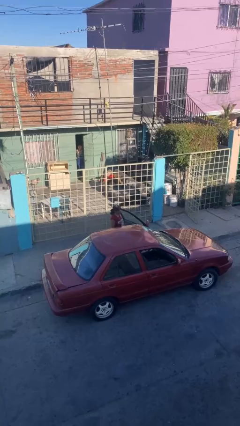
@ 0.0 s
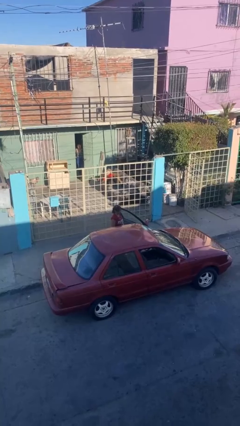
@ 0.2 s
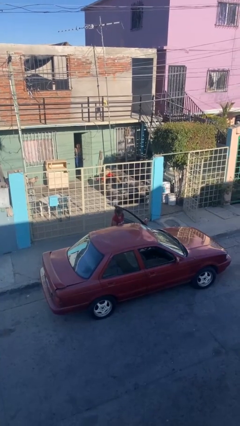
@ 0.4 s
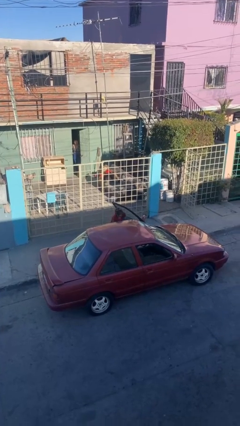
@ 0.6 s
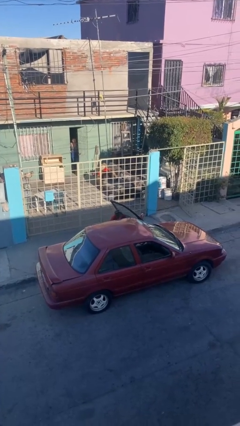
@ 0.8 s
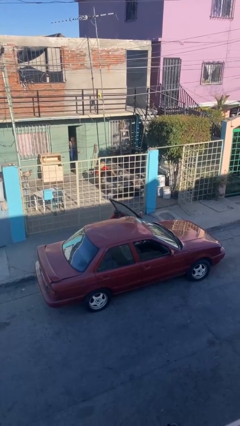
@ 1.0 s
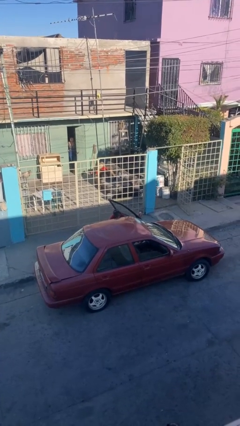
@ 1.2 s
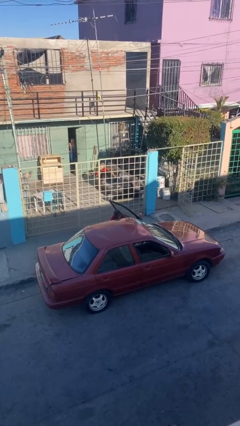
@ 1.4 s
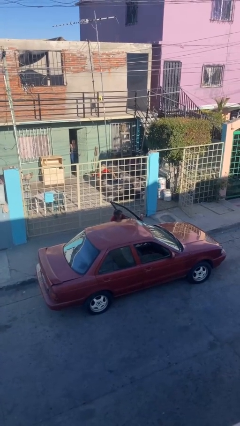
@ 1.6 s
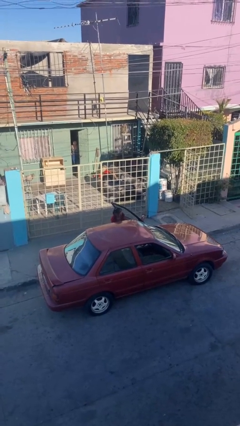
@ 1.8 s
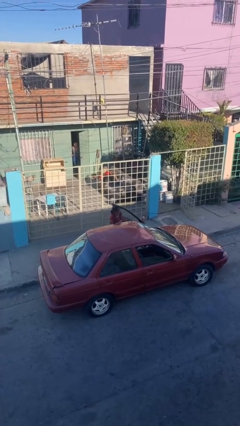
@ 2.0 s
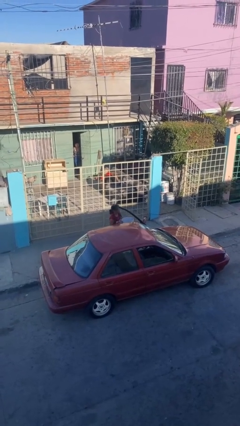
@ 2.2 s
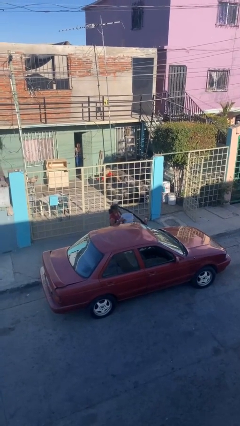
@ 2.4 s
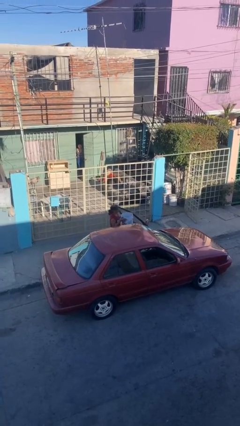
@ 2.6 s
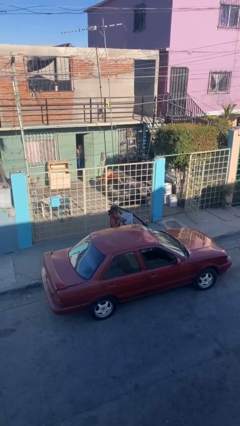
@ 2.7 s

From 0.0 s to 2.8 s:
person unloads car

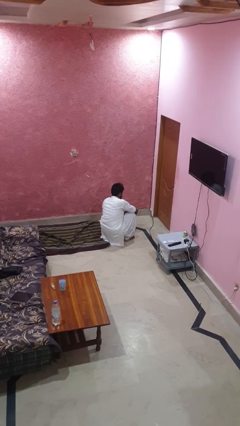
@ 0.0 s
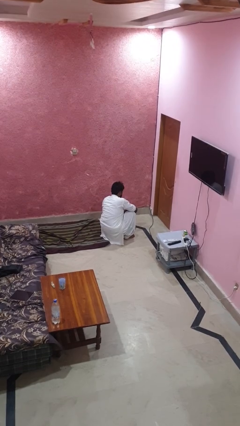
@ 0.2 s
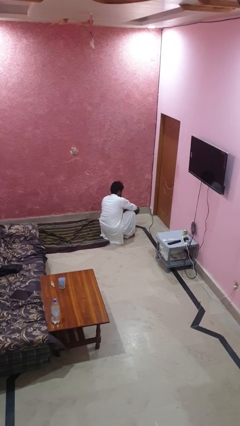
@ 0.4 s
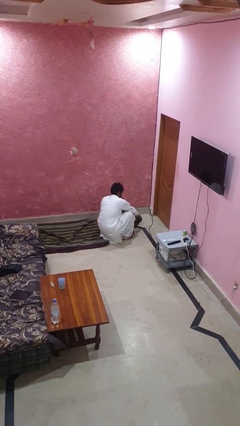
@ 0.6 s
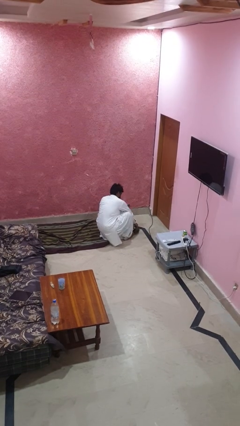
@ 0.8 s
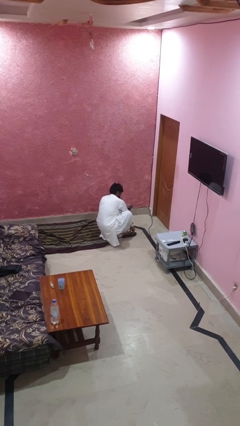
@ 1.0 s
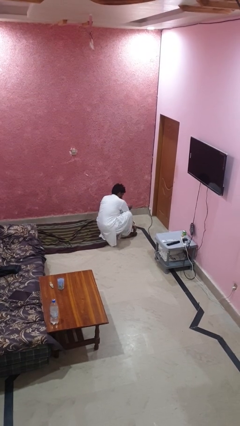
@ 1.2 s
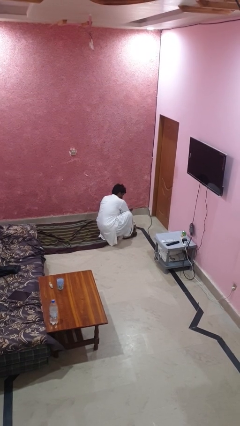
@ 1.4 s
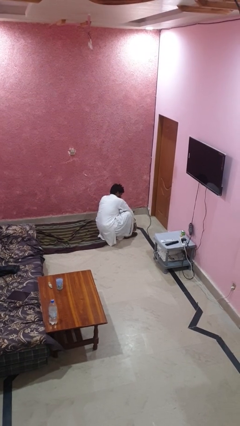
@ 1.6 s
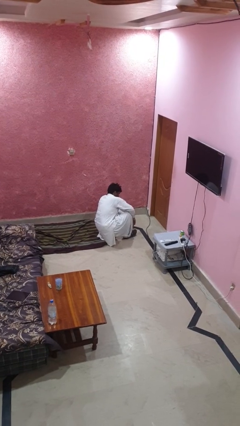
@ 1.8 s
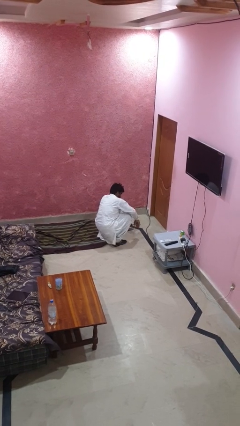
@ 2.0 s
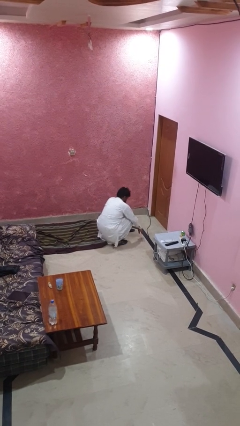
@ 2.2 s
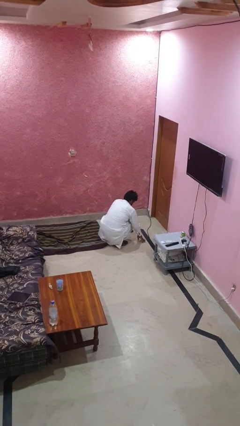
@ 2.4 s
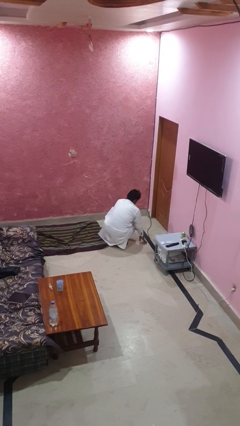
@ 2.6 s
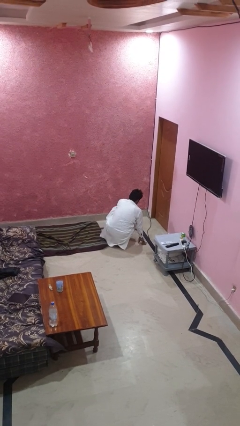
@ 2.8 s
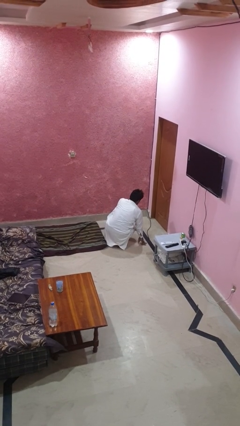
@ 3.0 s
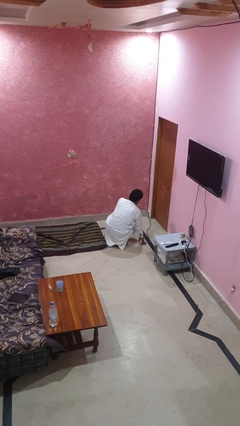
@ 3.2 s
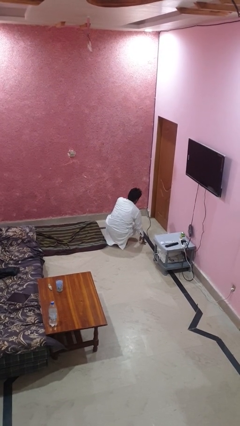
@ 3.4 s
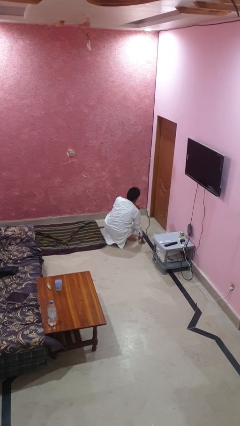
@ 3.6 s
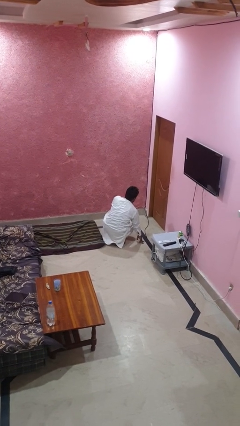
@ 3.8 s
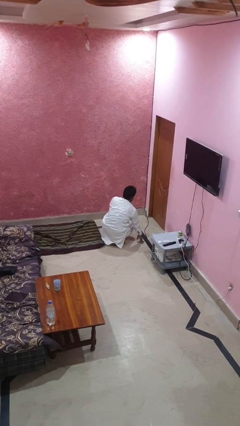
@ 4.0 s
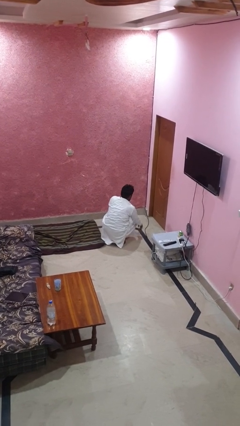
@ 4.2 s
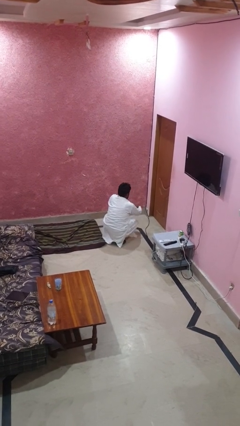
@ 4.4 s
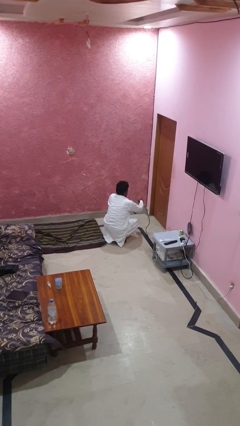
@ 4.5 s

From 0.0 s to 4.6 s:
person puts on shoes

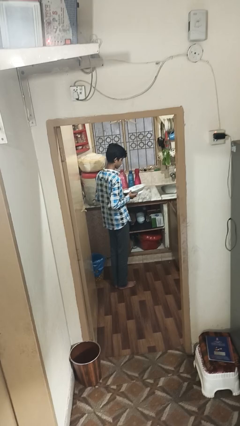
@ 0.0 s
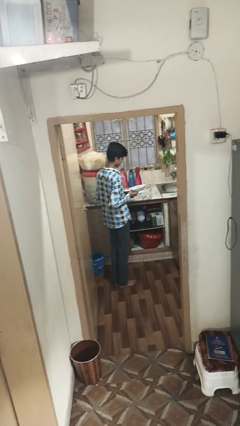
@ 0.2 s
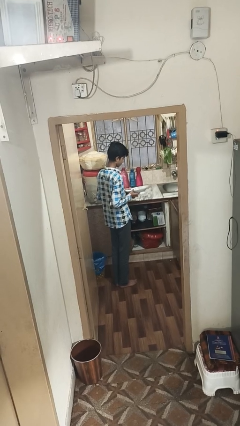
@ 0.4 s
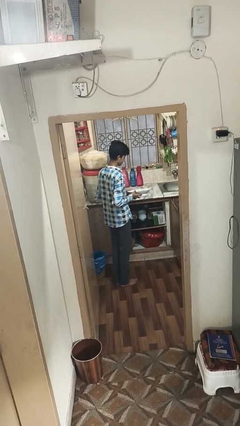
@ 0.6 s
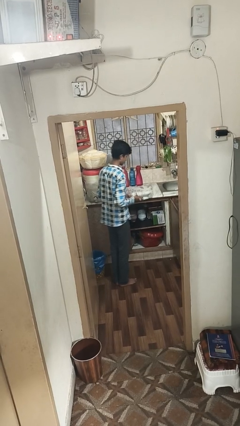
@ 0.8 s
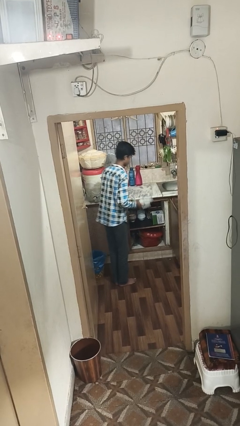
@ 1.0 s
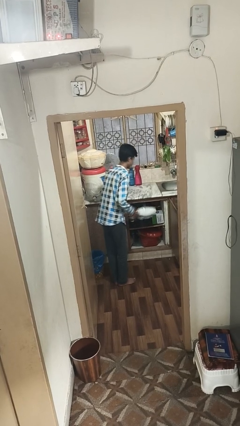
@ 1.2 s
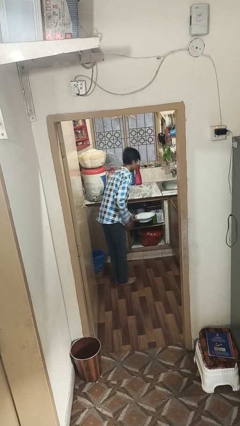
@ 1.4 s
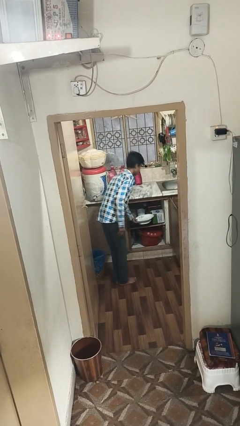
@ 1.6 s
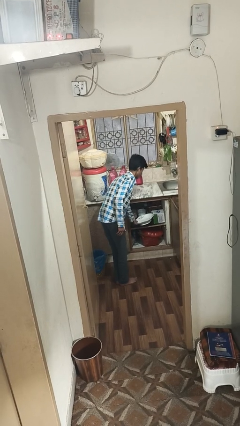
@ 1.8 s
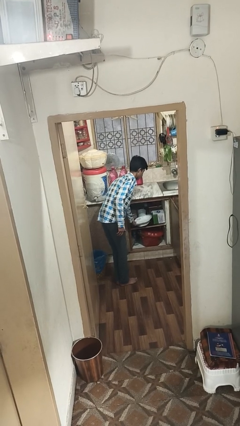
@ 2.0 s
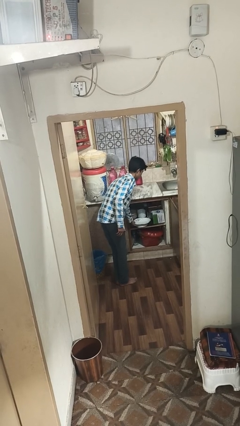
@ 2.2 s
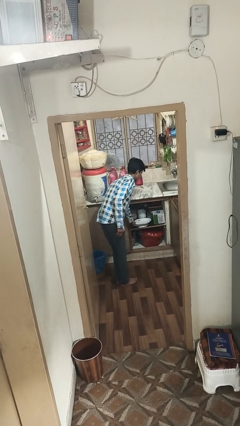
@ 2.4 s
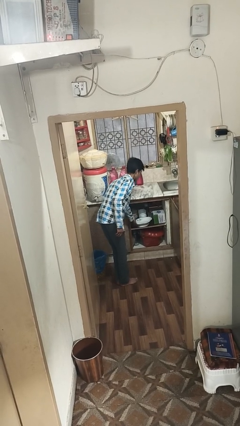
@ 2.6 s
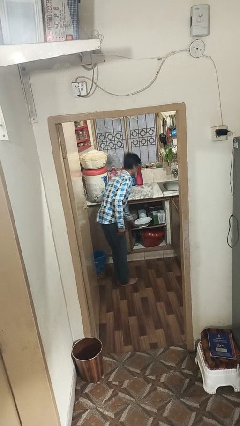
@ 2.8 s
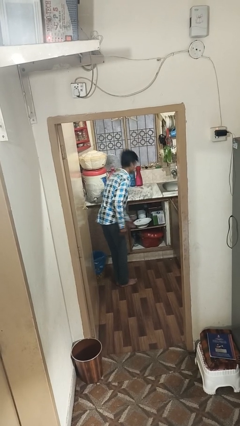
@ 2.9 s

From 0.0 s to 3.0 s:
person puts down object into cabinet

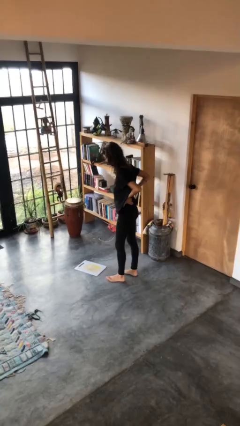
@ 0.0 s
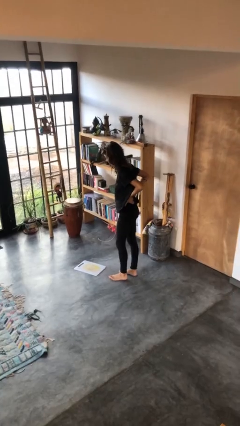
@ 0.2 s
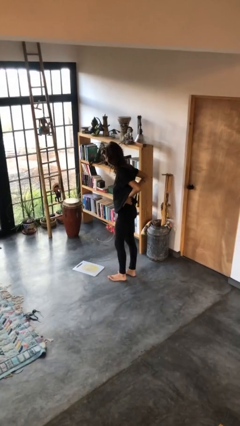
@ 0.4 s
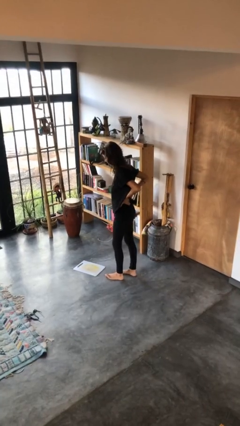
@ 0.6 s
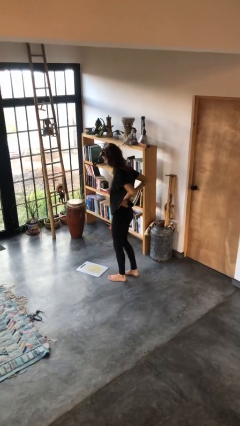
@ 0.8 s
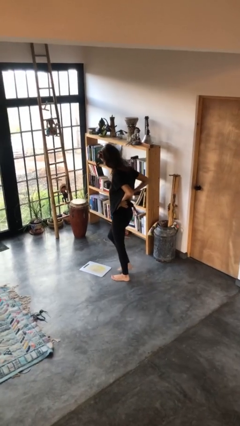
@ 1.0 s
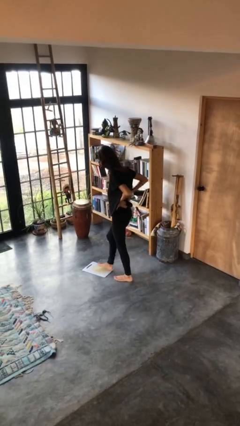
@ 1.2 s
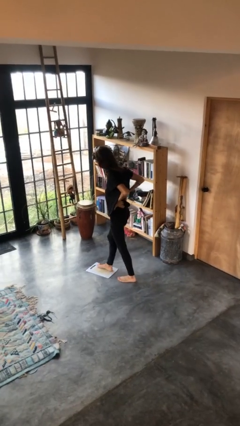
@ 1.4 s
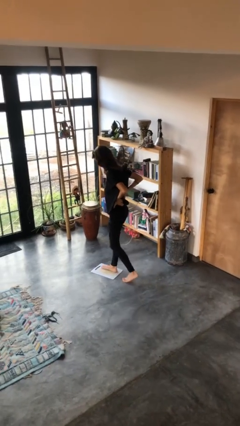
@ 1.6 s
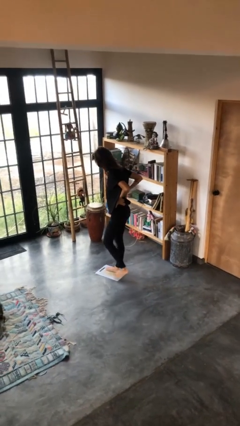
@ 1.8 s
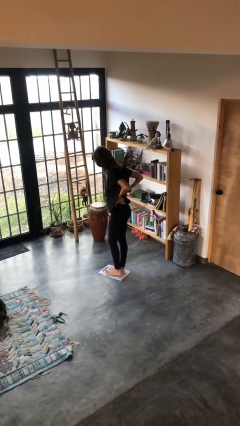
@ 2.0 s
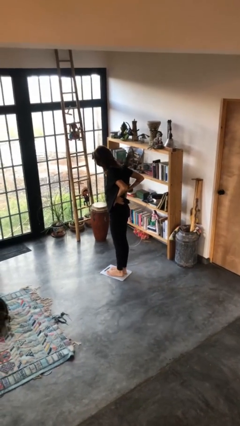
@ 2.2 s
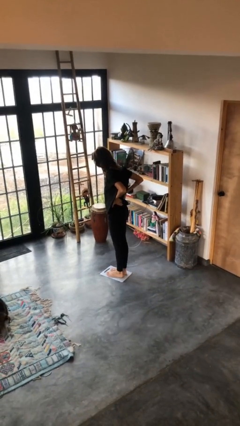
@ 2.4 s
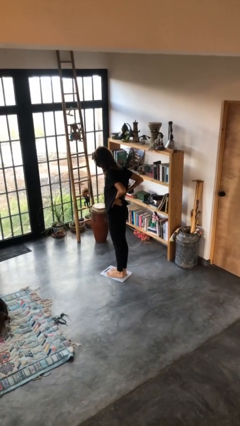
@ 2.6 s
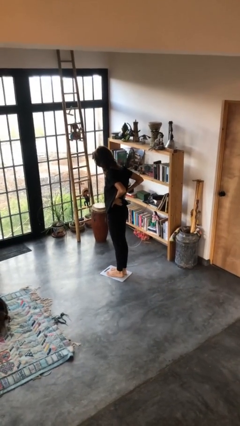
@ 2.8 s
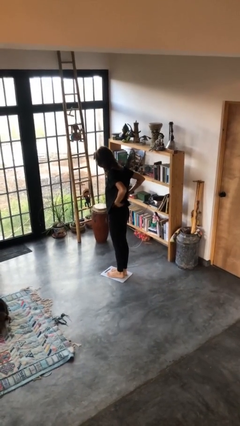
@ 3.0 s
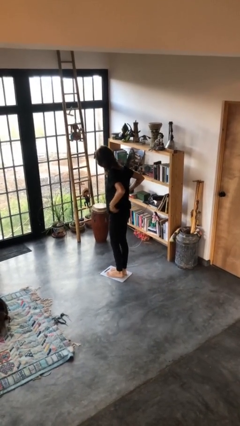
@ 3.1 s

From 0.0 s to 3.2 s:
person uses bodyweight scale

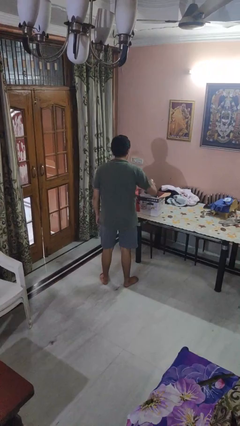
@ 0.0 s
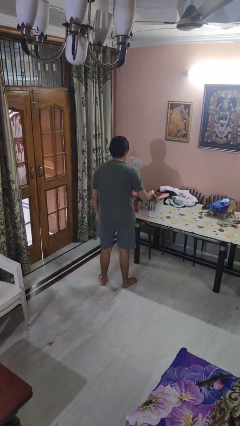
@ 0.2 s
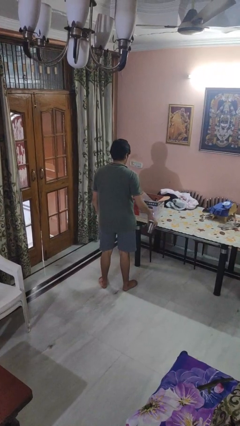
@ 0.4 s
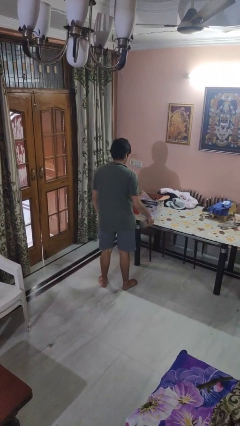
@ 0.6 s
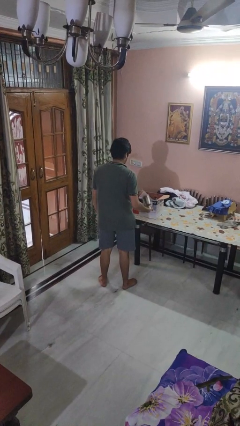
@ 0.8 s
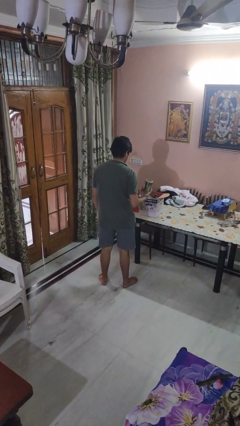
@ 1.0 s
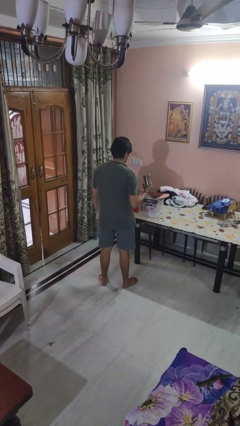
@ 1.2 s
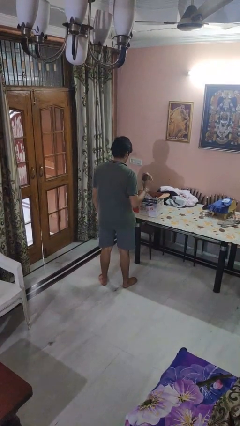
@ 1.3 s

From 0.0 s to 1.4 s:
person takes object from box

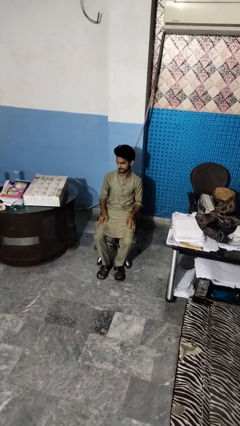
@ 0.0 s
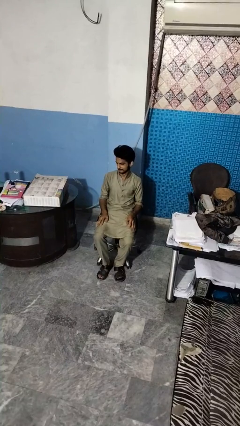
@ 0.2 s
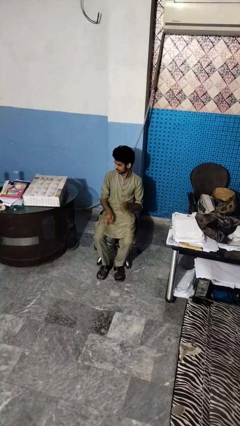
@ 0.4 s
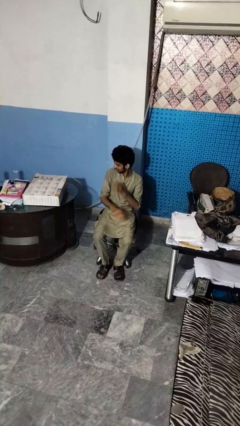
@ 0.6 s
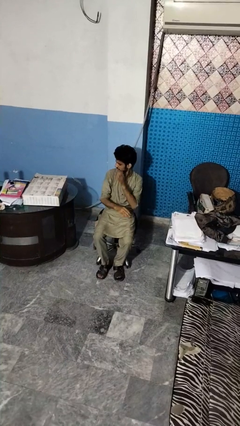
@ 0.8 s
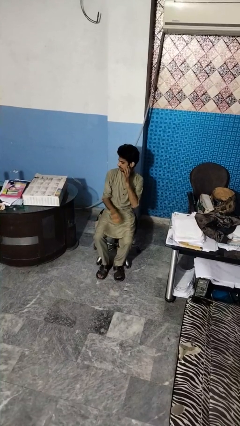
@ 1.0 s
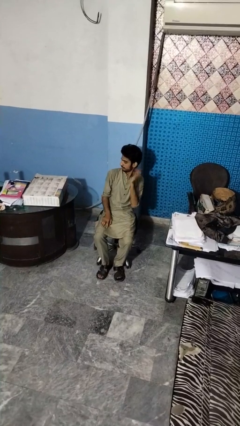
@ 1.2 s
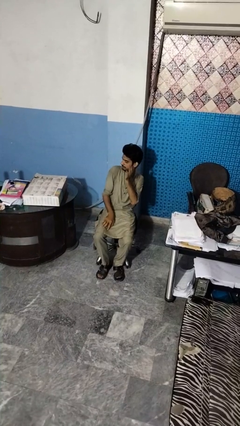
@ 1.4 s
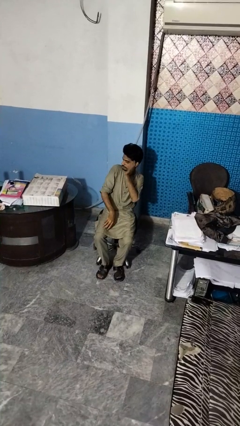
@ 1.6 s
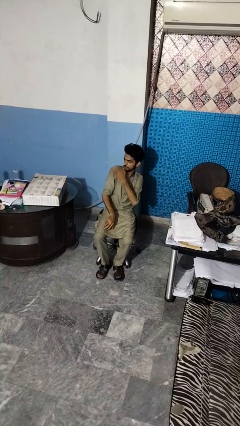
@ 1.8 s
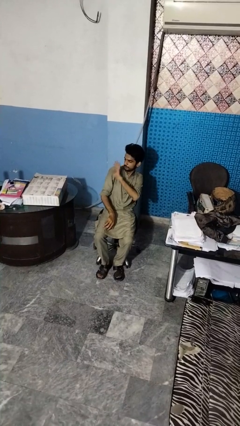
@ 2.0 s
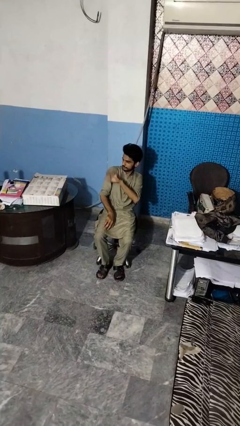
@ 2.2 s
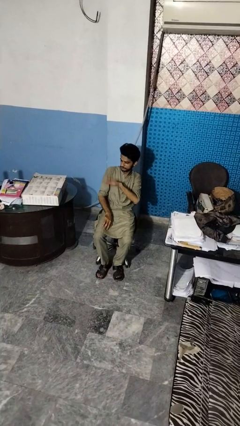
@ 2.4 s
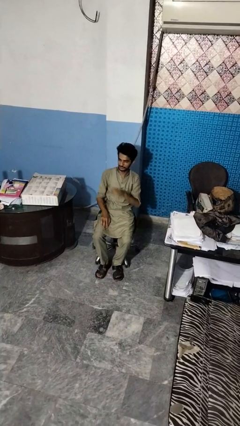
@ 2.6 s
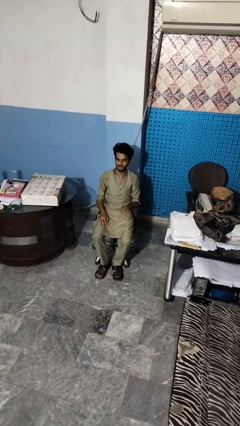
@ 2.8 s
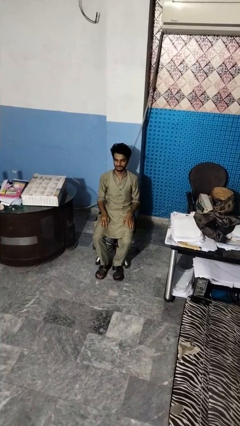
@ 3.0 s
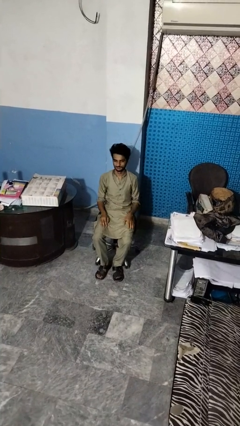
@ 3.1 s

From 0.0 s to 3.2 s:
person swats bug
